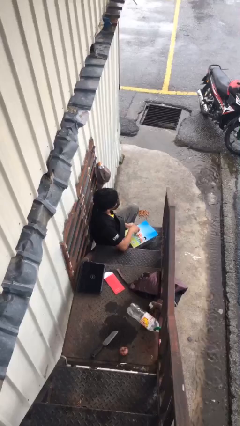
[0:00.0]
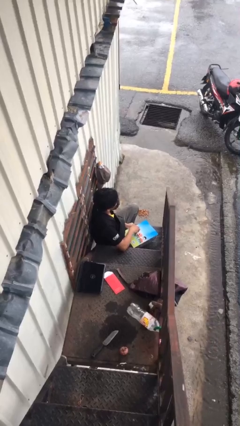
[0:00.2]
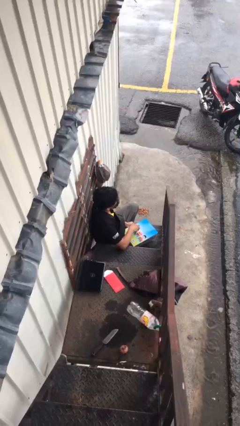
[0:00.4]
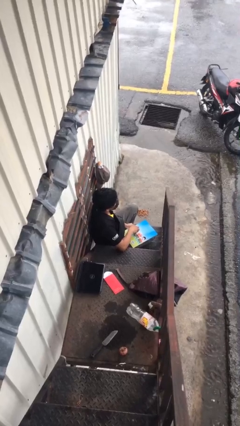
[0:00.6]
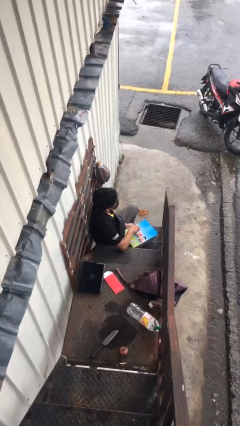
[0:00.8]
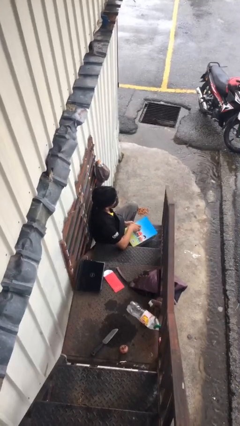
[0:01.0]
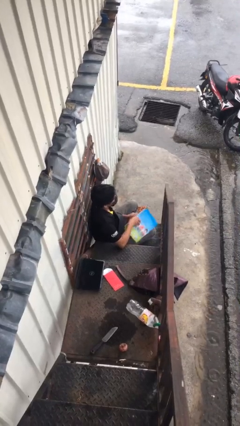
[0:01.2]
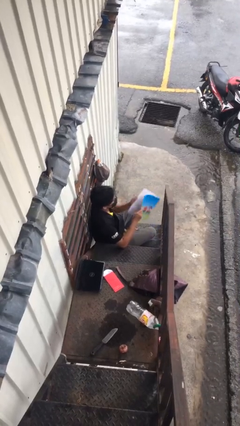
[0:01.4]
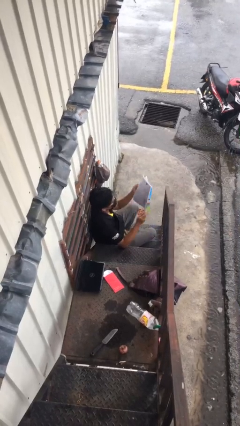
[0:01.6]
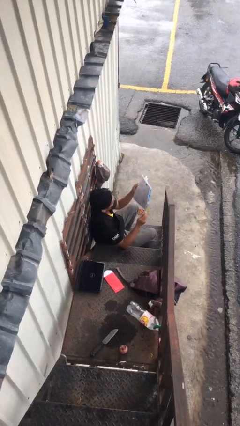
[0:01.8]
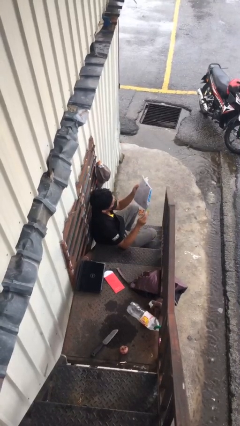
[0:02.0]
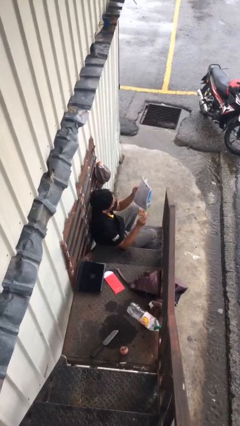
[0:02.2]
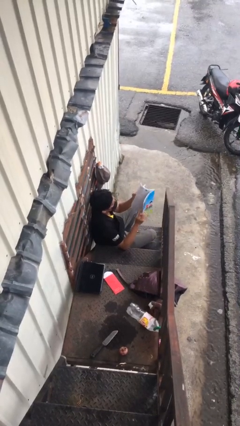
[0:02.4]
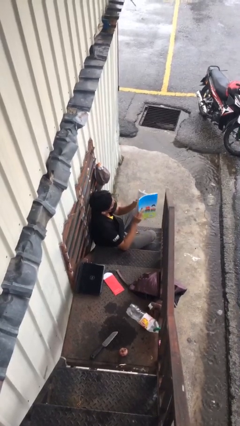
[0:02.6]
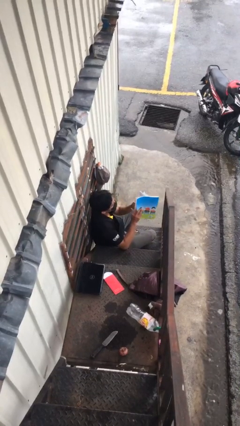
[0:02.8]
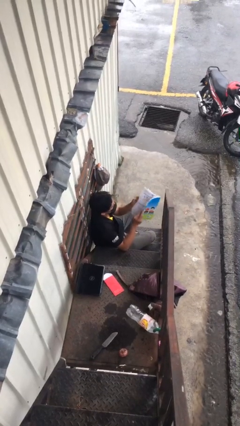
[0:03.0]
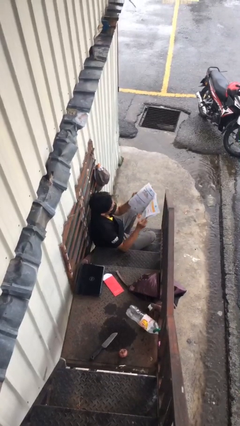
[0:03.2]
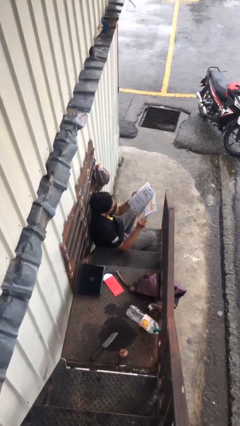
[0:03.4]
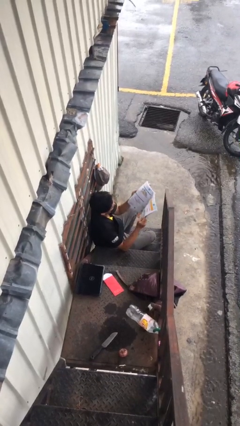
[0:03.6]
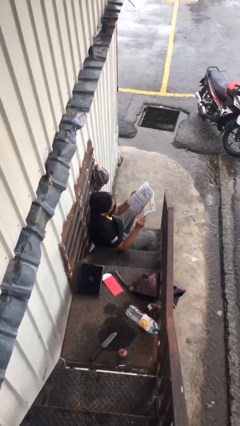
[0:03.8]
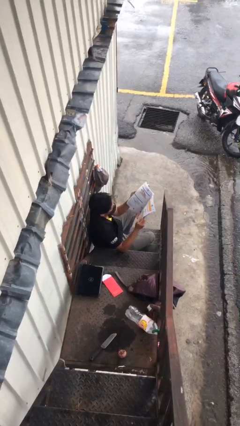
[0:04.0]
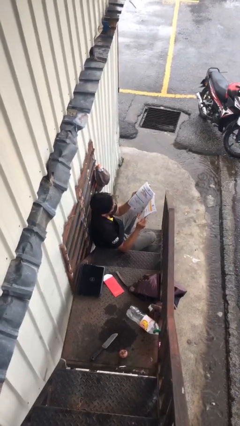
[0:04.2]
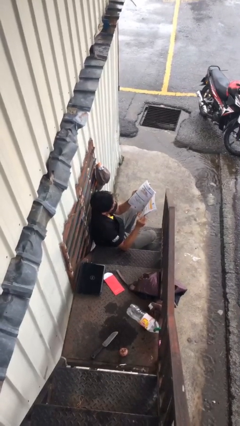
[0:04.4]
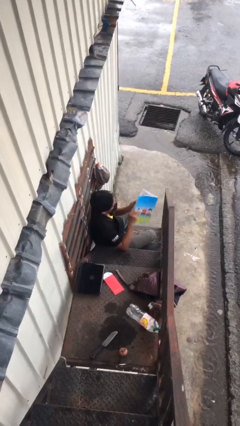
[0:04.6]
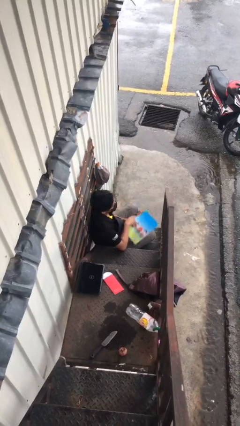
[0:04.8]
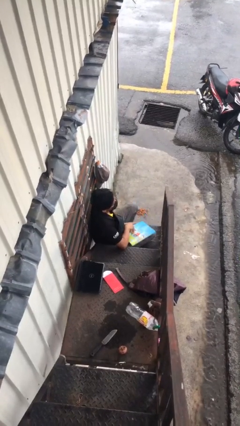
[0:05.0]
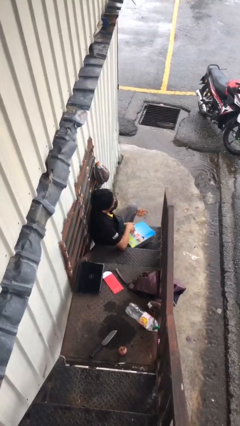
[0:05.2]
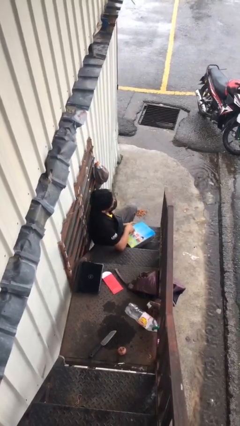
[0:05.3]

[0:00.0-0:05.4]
person reads document

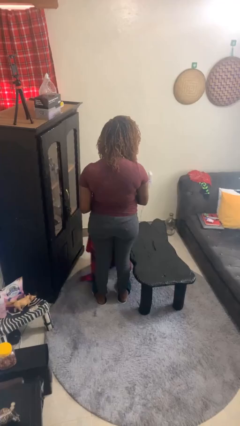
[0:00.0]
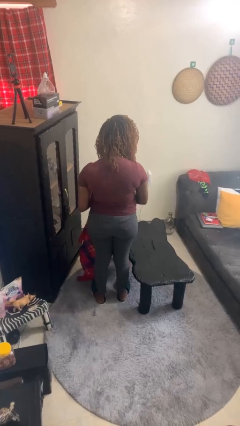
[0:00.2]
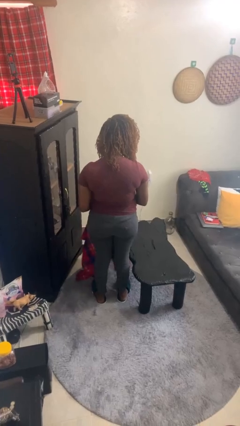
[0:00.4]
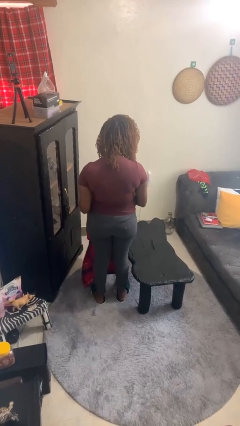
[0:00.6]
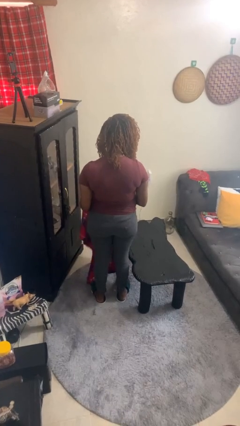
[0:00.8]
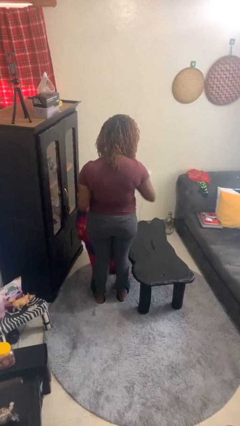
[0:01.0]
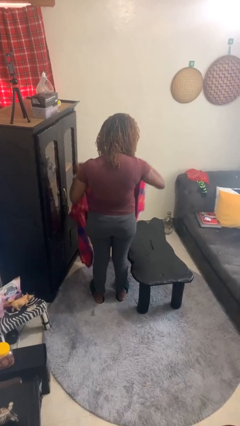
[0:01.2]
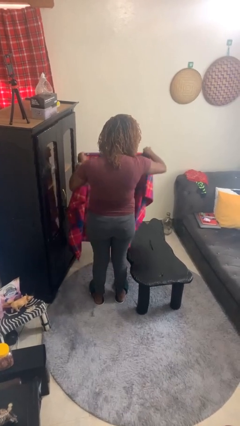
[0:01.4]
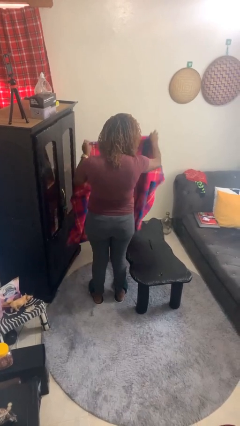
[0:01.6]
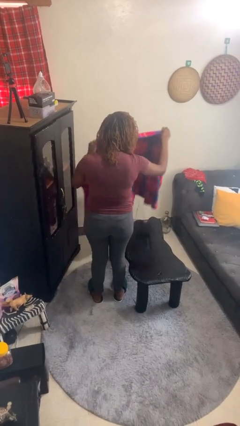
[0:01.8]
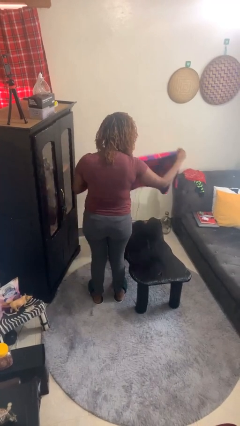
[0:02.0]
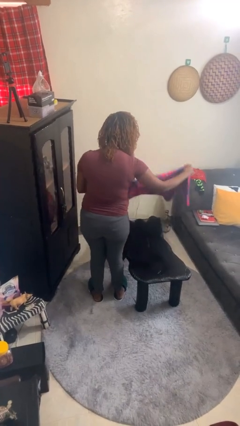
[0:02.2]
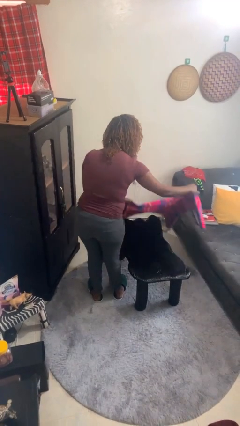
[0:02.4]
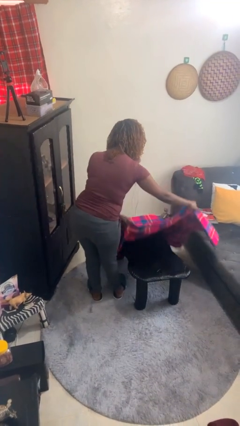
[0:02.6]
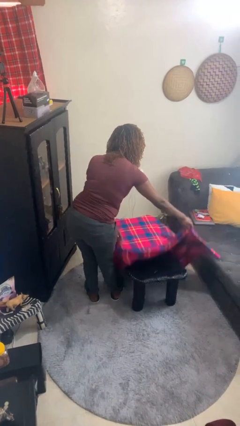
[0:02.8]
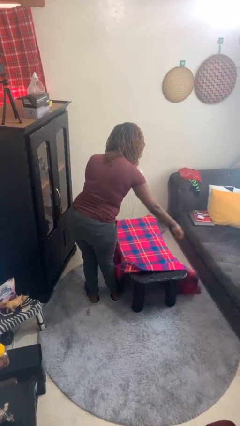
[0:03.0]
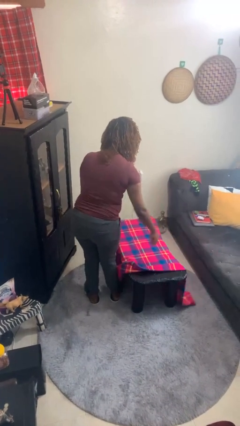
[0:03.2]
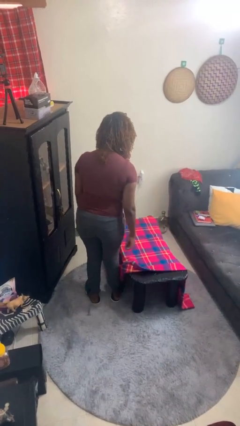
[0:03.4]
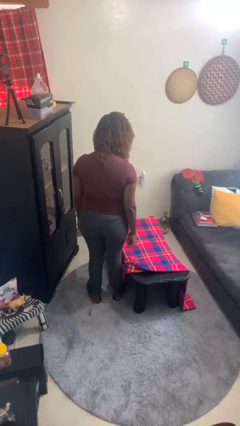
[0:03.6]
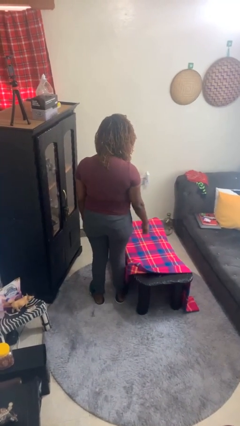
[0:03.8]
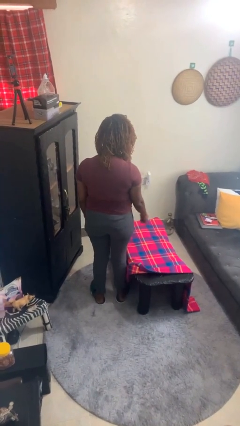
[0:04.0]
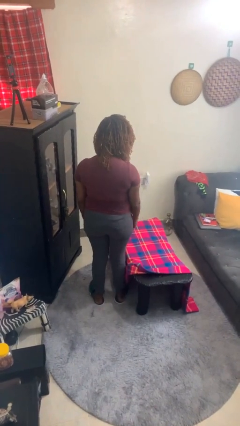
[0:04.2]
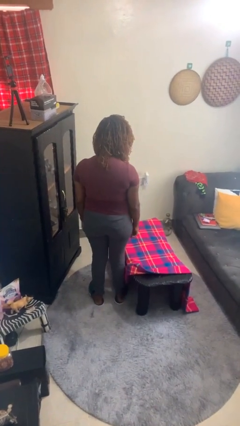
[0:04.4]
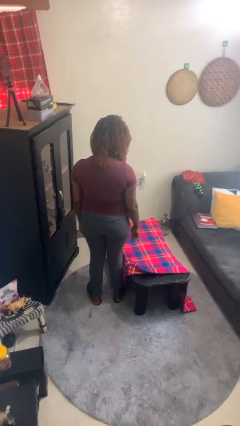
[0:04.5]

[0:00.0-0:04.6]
person spreads tablecloth

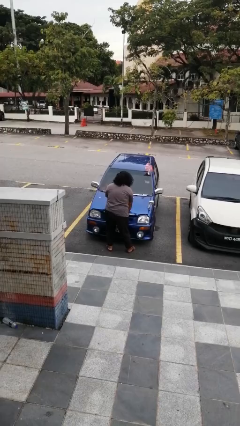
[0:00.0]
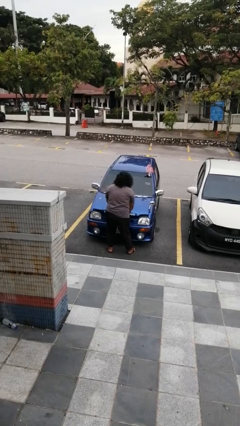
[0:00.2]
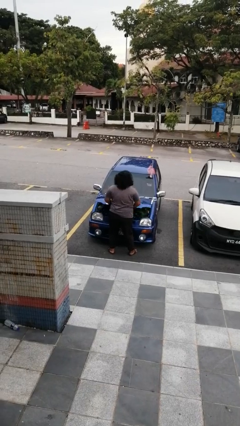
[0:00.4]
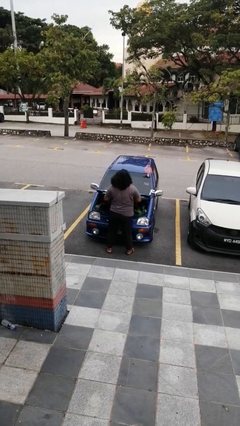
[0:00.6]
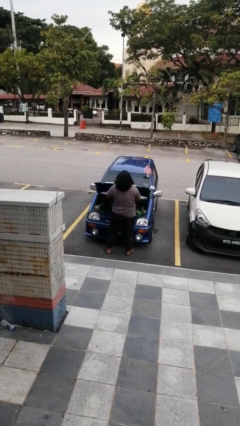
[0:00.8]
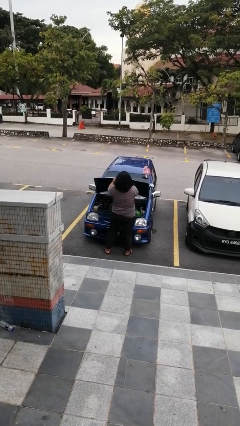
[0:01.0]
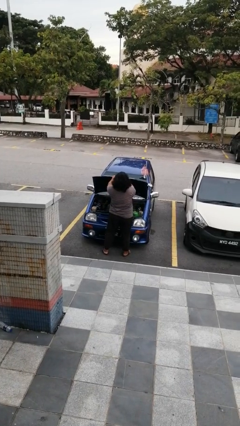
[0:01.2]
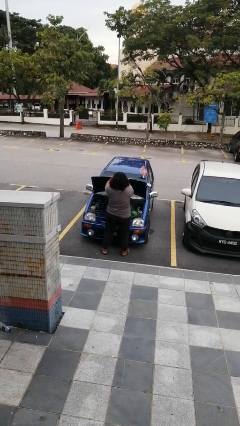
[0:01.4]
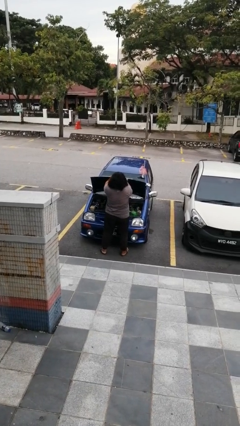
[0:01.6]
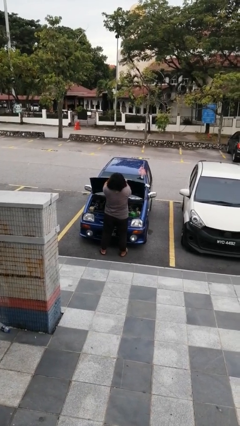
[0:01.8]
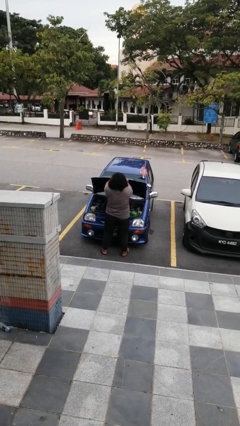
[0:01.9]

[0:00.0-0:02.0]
person opens car hood

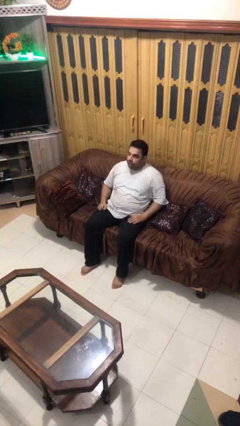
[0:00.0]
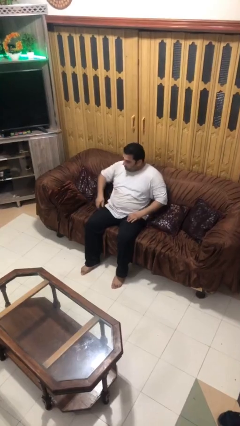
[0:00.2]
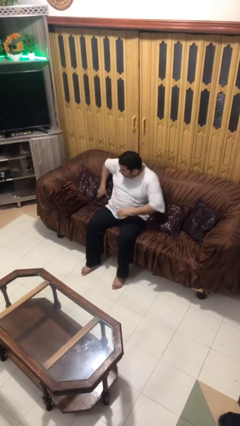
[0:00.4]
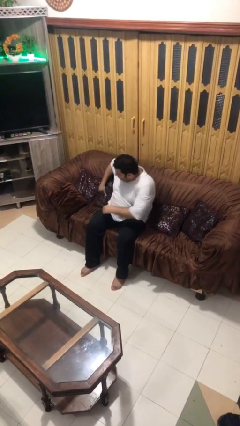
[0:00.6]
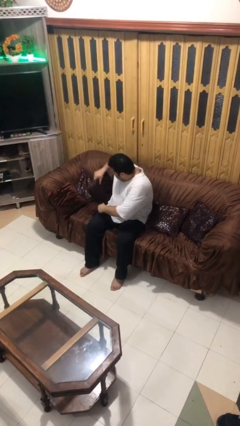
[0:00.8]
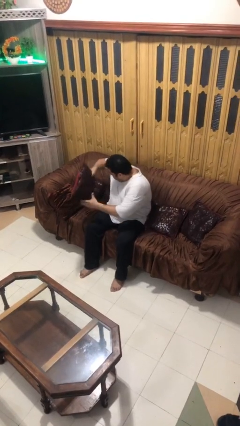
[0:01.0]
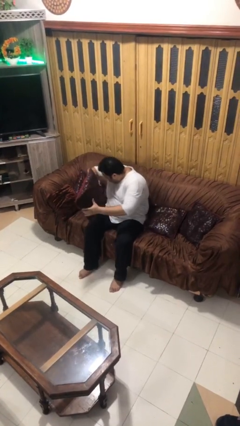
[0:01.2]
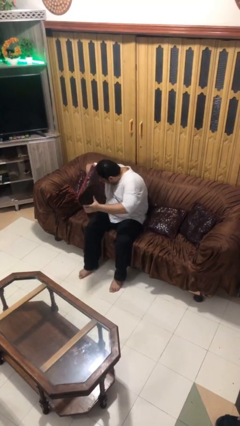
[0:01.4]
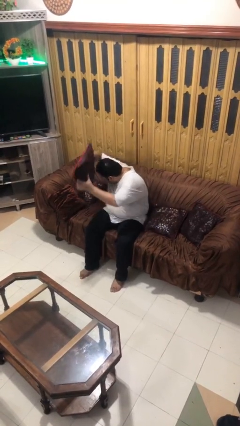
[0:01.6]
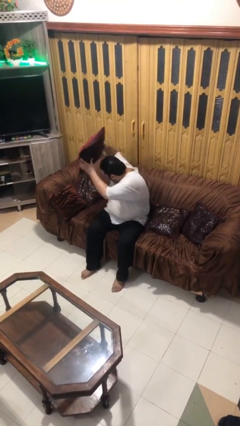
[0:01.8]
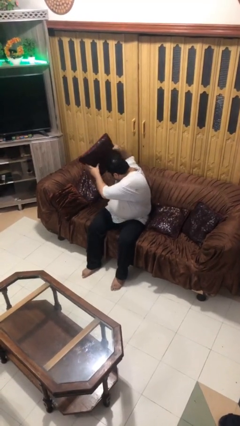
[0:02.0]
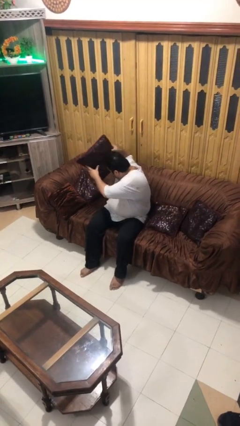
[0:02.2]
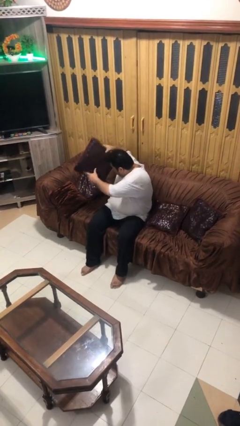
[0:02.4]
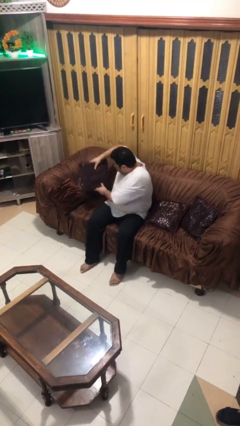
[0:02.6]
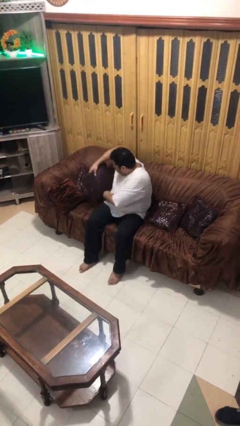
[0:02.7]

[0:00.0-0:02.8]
person searches in couch

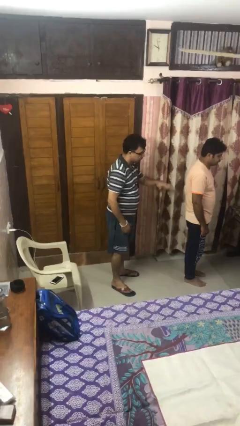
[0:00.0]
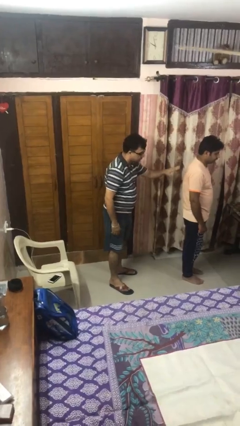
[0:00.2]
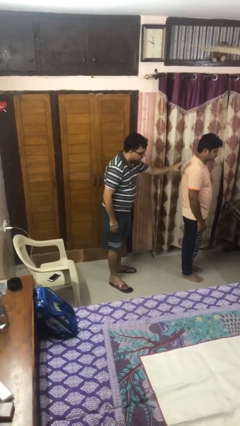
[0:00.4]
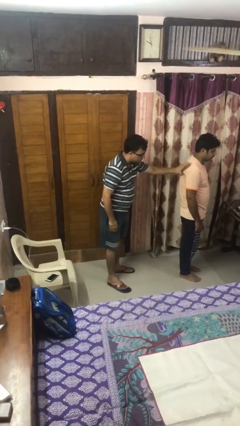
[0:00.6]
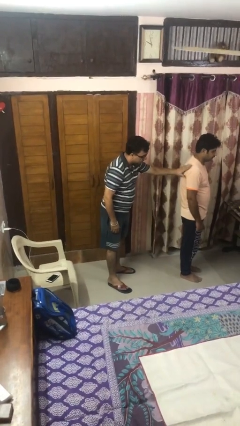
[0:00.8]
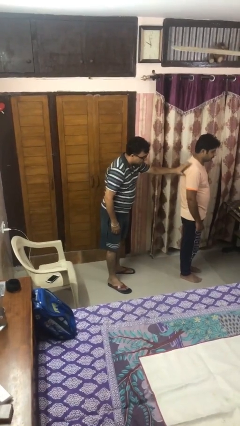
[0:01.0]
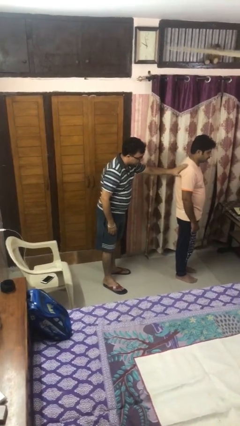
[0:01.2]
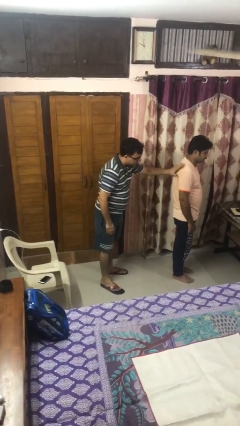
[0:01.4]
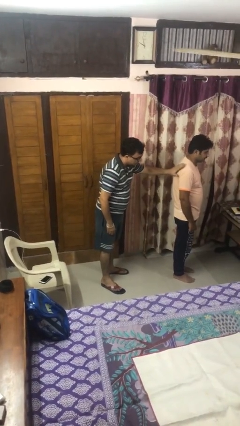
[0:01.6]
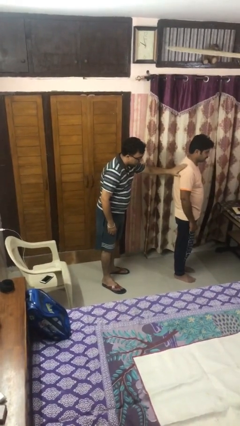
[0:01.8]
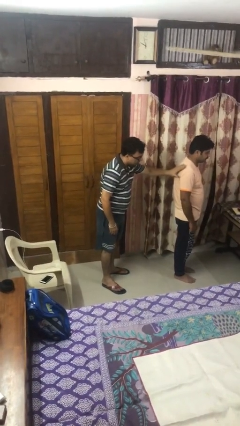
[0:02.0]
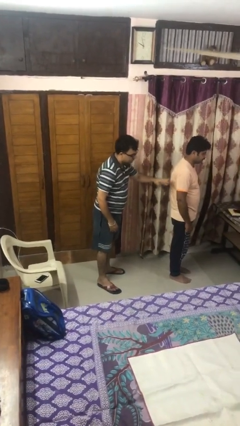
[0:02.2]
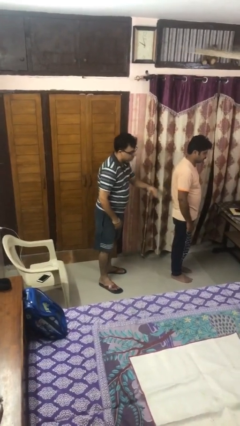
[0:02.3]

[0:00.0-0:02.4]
person touches back of person

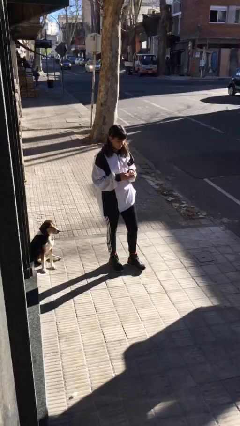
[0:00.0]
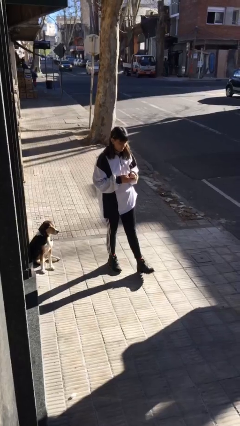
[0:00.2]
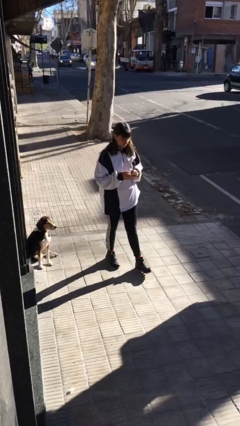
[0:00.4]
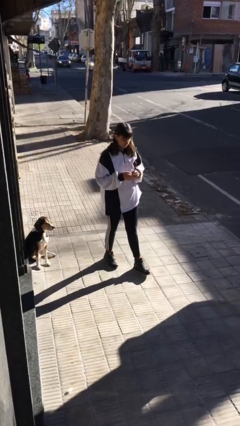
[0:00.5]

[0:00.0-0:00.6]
person talks on phone
